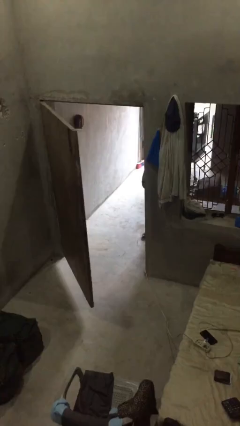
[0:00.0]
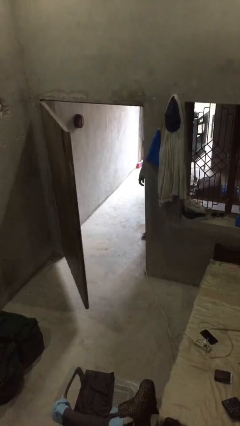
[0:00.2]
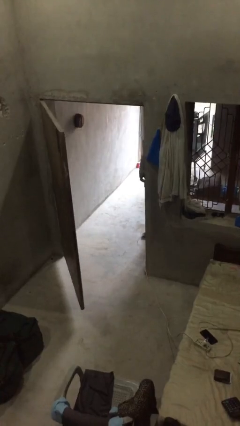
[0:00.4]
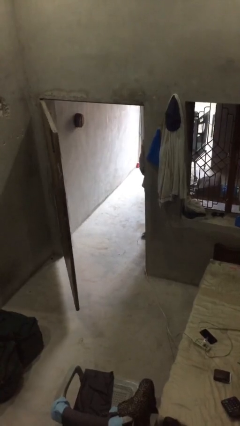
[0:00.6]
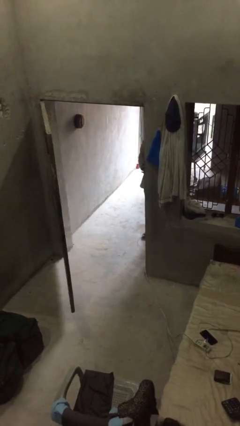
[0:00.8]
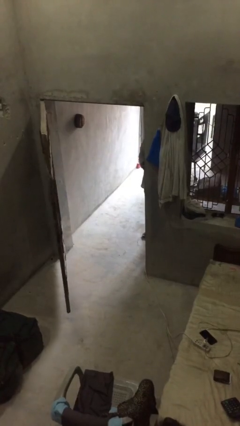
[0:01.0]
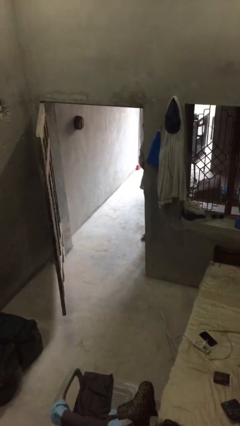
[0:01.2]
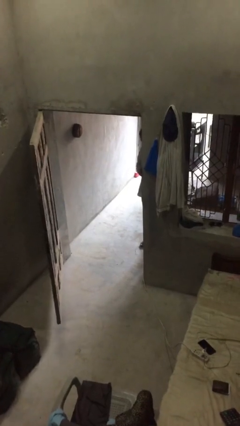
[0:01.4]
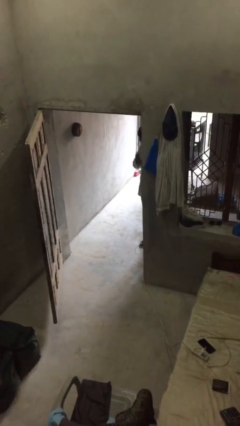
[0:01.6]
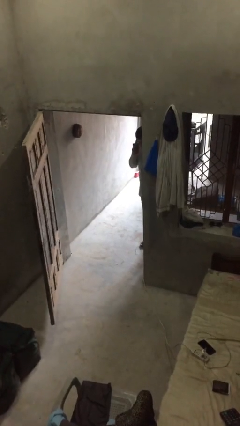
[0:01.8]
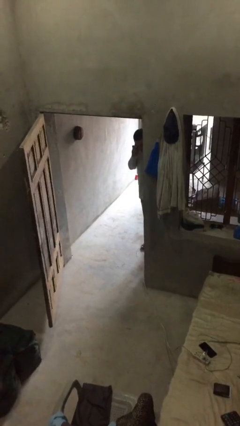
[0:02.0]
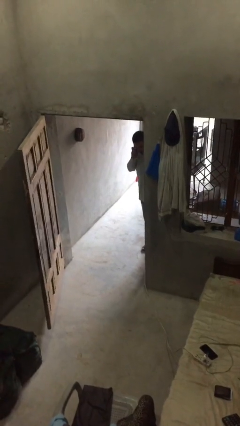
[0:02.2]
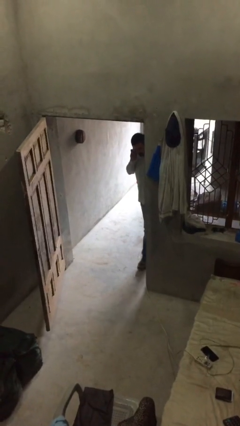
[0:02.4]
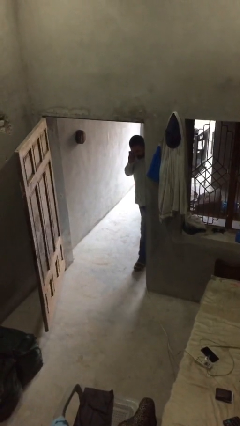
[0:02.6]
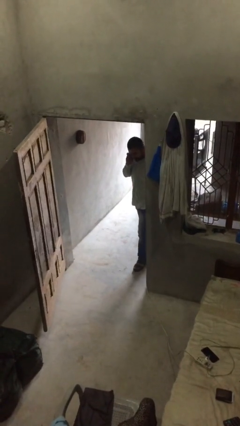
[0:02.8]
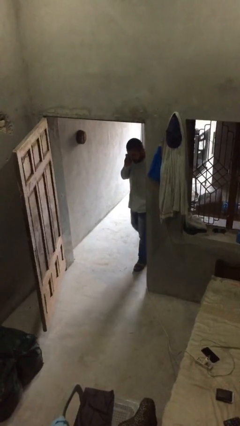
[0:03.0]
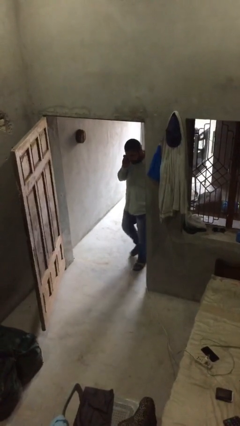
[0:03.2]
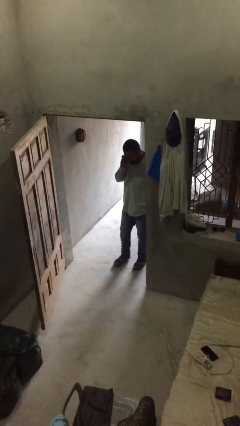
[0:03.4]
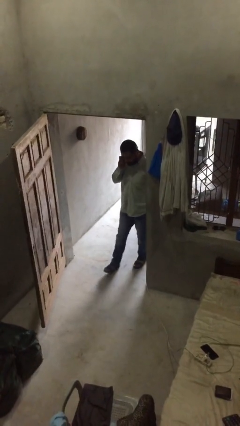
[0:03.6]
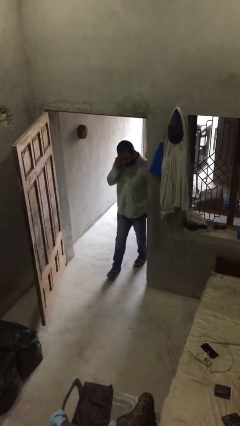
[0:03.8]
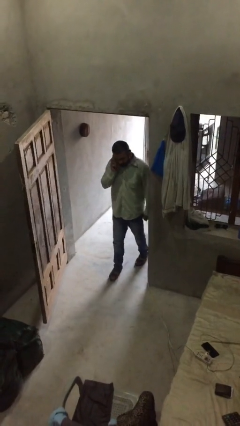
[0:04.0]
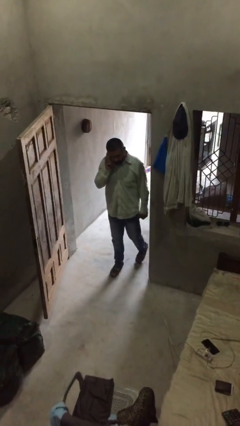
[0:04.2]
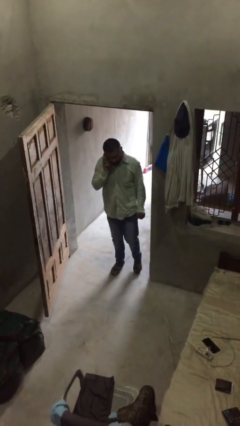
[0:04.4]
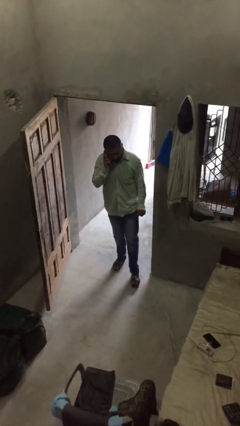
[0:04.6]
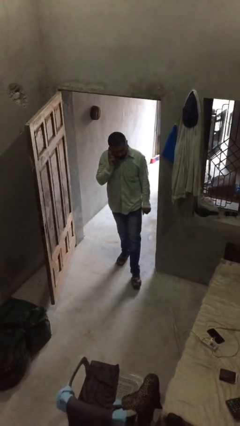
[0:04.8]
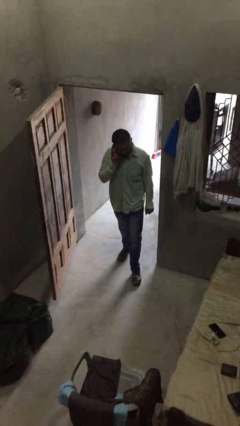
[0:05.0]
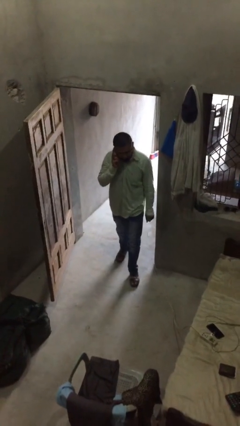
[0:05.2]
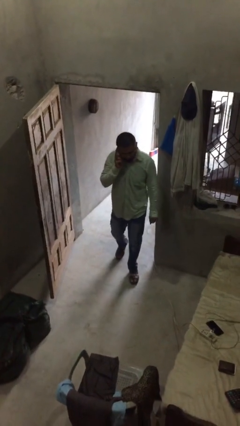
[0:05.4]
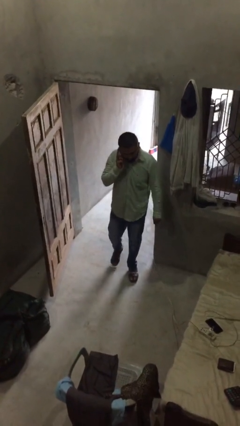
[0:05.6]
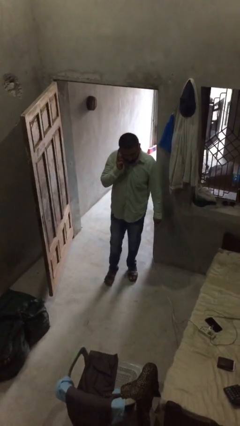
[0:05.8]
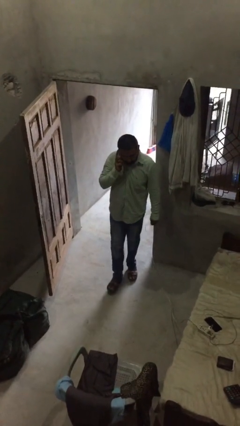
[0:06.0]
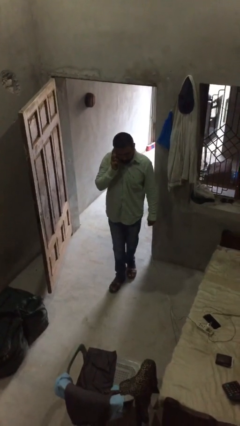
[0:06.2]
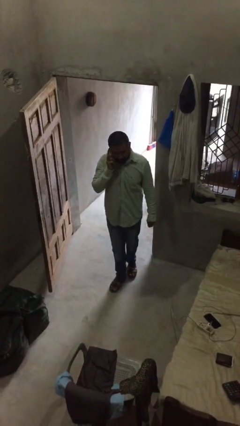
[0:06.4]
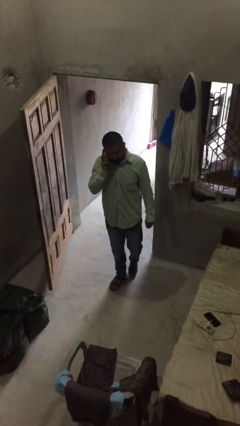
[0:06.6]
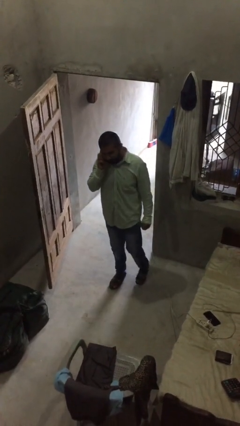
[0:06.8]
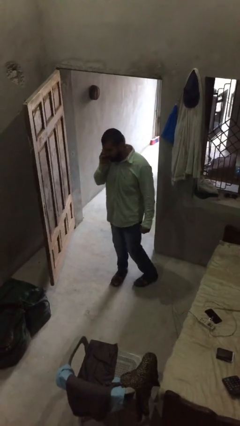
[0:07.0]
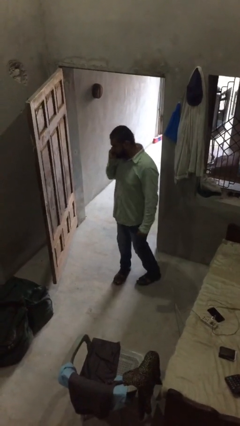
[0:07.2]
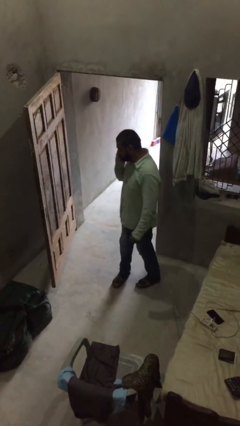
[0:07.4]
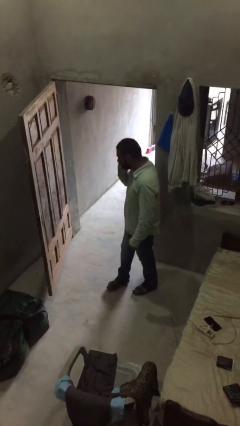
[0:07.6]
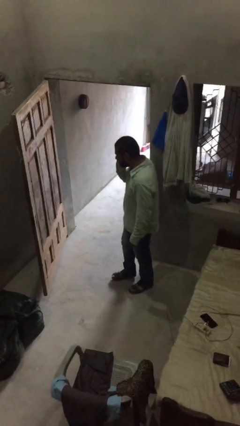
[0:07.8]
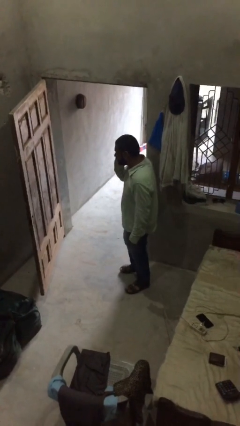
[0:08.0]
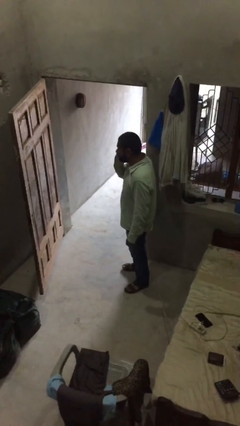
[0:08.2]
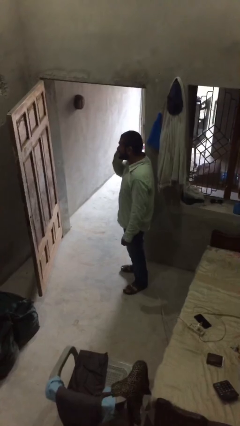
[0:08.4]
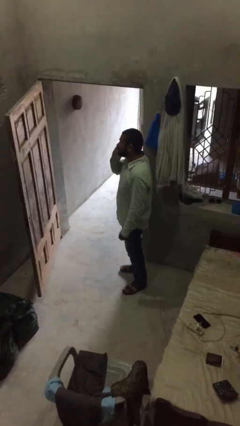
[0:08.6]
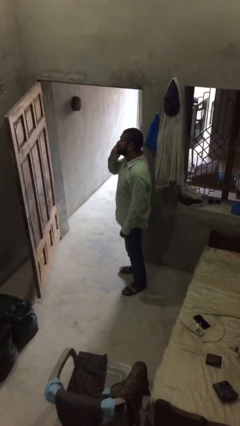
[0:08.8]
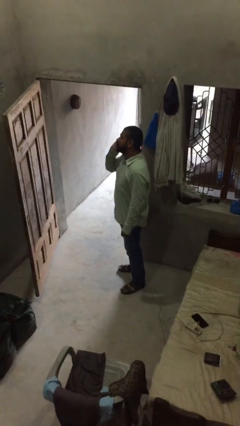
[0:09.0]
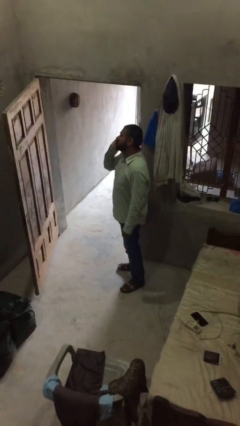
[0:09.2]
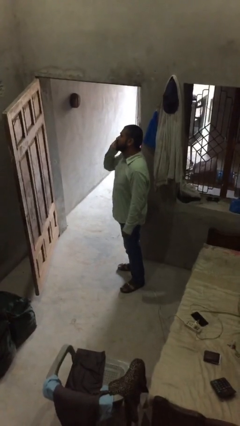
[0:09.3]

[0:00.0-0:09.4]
person enters scene through structure

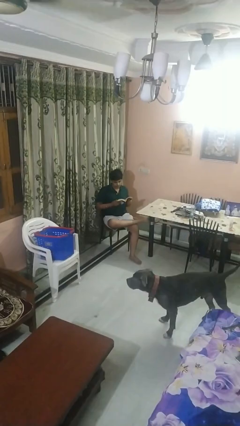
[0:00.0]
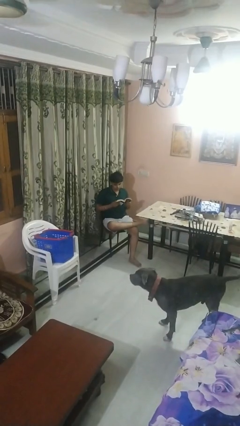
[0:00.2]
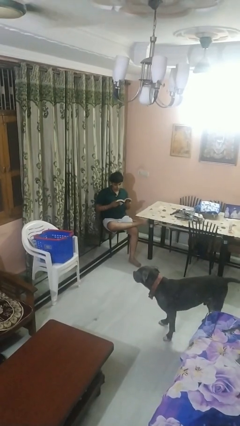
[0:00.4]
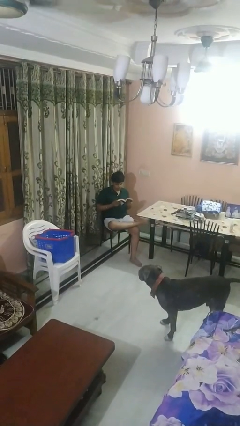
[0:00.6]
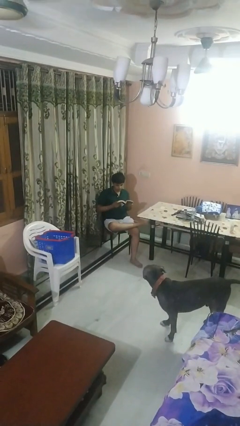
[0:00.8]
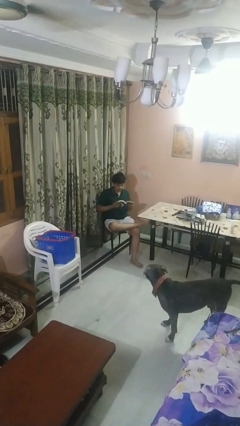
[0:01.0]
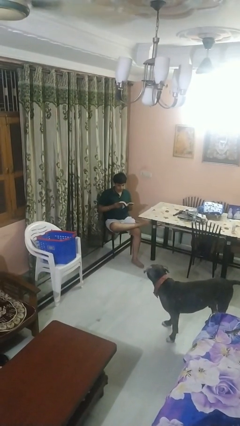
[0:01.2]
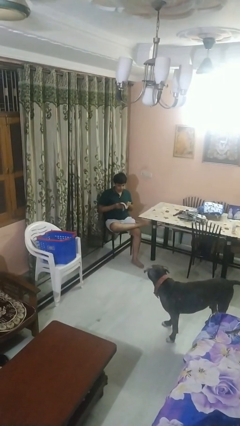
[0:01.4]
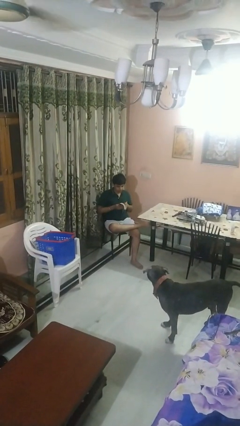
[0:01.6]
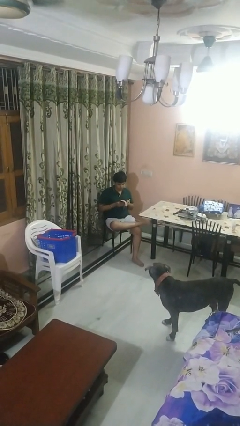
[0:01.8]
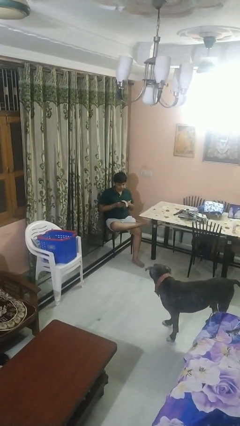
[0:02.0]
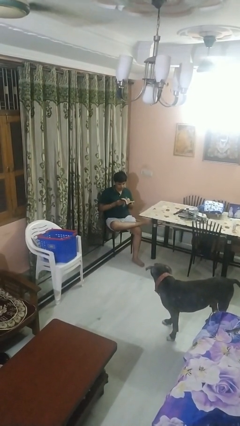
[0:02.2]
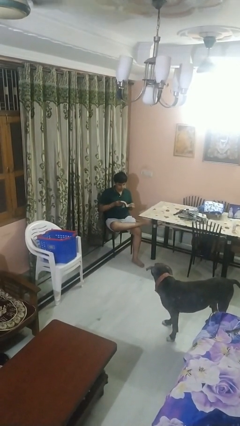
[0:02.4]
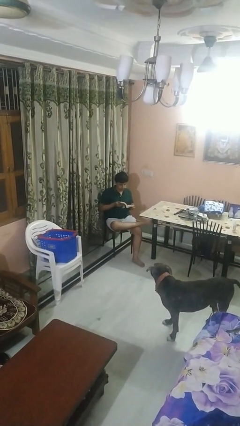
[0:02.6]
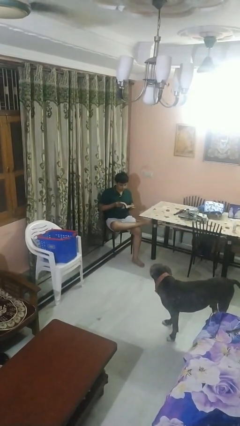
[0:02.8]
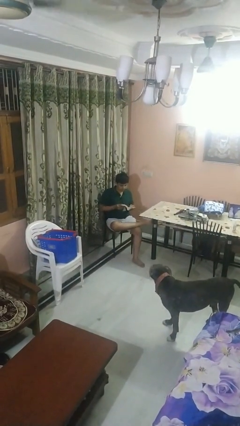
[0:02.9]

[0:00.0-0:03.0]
person reads book

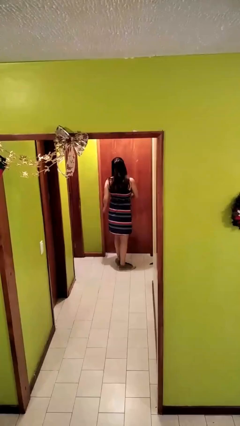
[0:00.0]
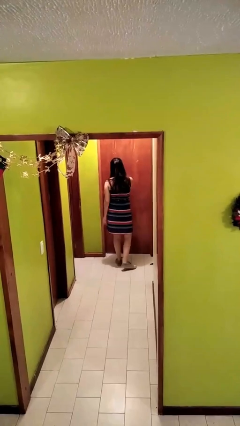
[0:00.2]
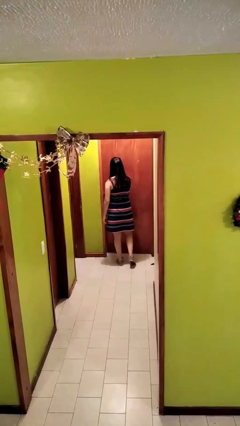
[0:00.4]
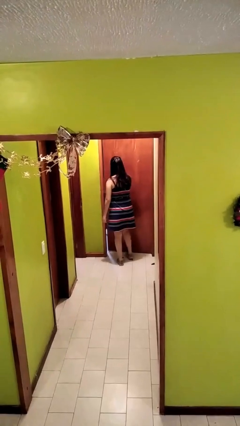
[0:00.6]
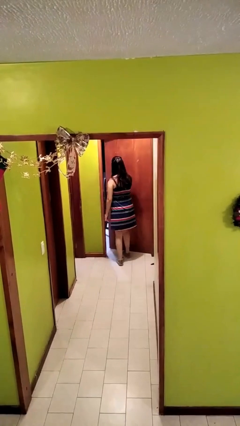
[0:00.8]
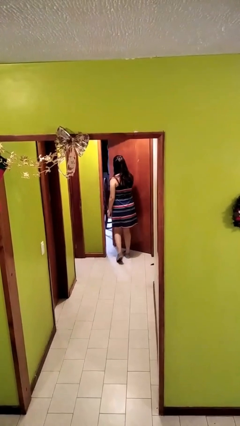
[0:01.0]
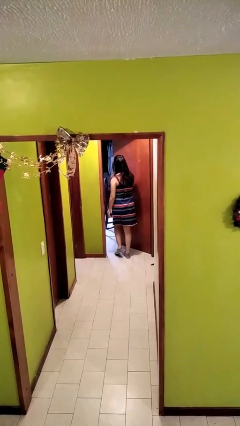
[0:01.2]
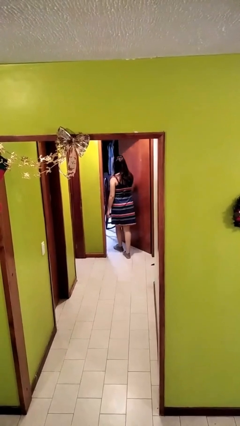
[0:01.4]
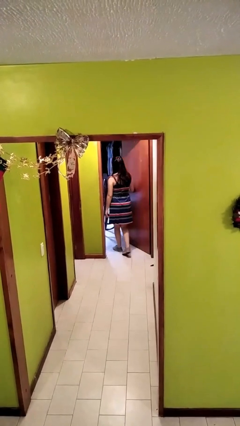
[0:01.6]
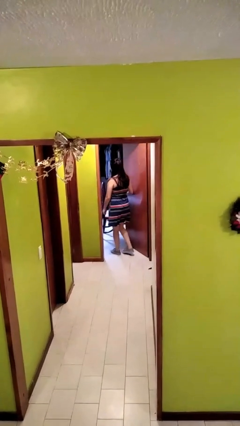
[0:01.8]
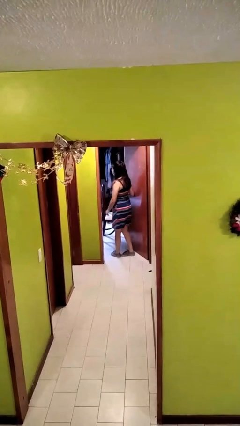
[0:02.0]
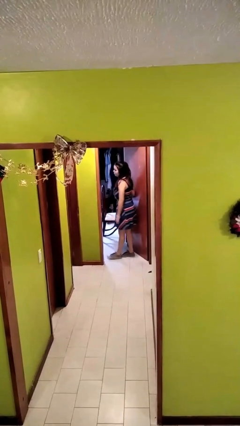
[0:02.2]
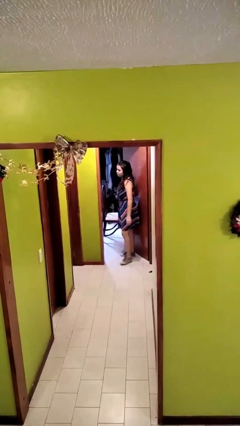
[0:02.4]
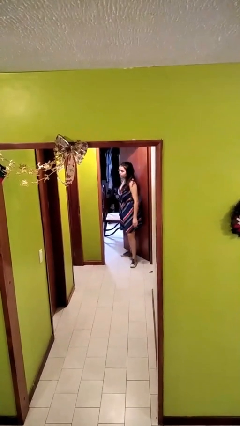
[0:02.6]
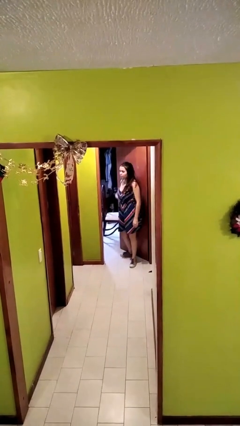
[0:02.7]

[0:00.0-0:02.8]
person opens facility door

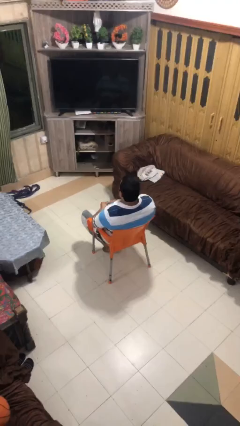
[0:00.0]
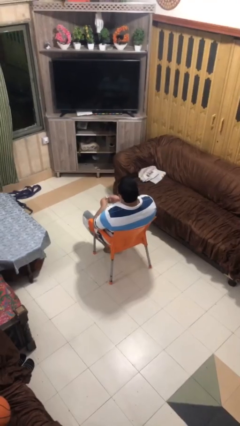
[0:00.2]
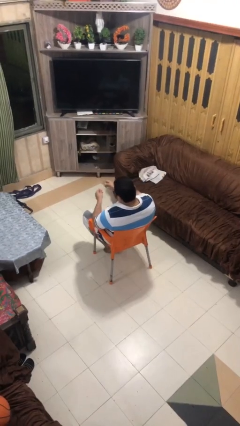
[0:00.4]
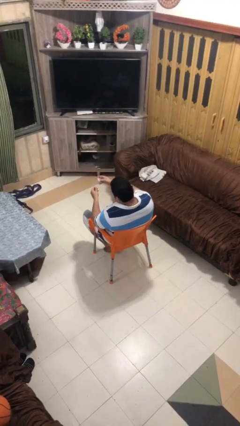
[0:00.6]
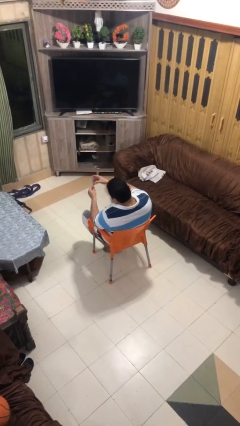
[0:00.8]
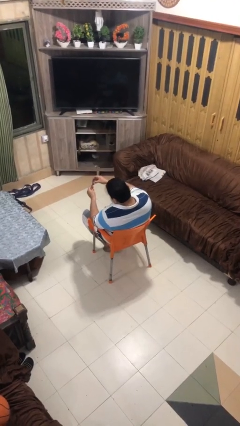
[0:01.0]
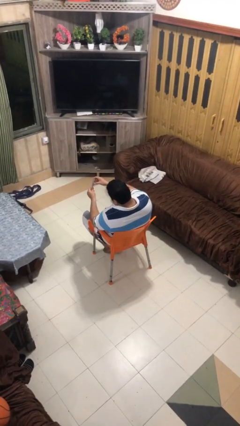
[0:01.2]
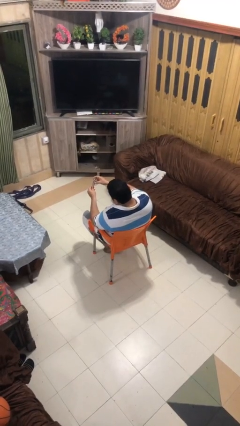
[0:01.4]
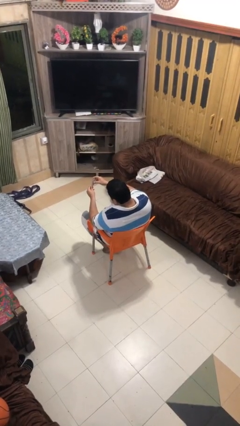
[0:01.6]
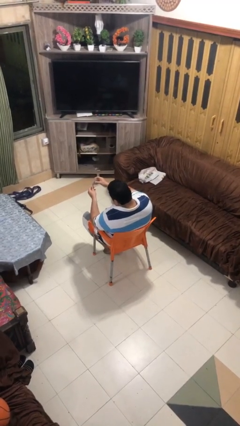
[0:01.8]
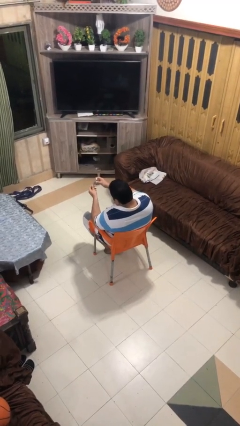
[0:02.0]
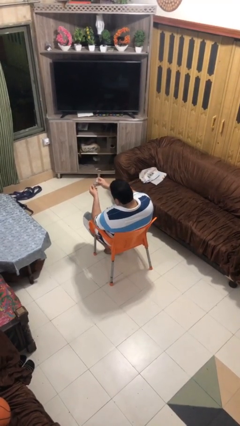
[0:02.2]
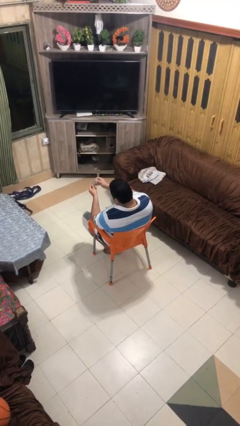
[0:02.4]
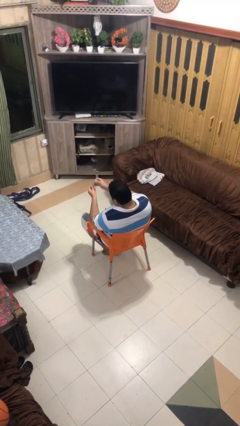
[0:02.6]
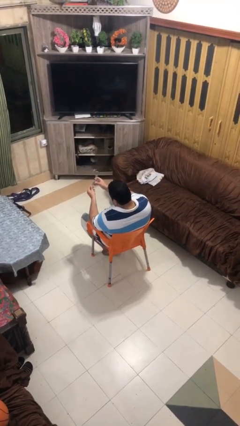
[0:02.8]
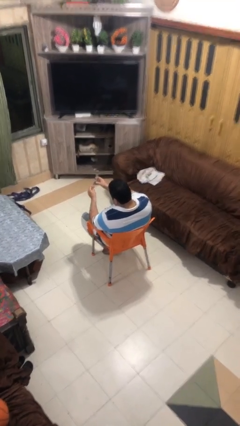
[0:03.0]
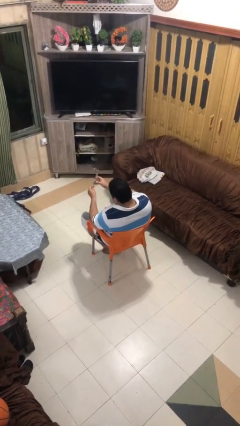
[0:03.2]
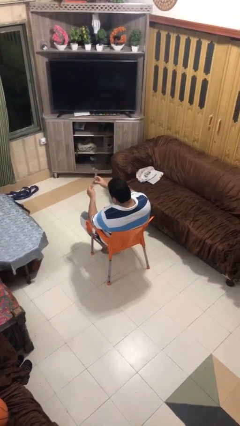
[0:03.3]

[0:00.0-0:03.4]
person clips fingernails
